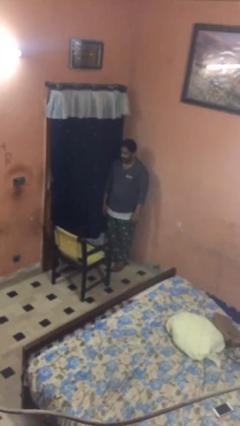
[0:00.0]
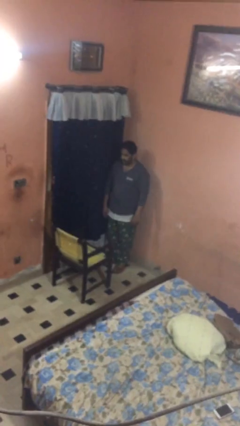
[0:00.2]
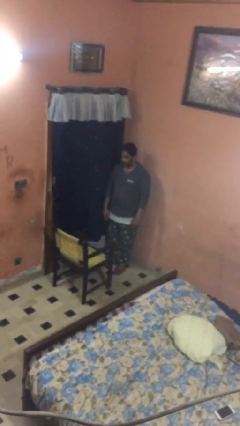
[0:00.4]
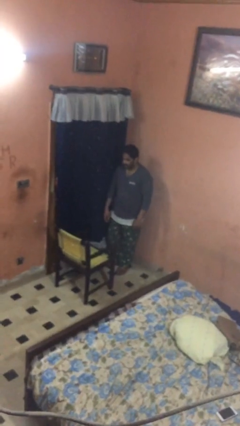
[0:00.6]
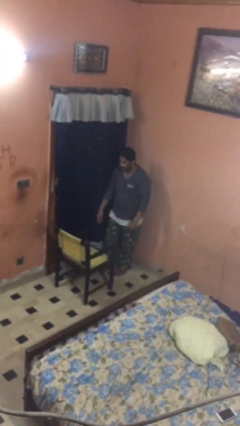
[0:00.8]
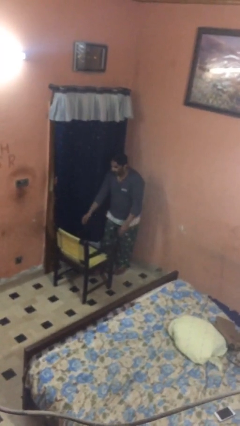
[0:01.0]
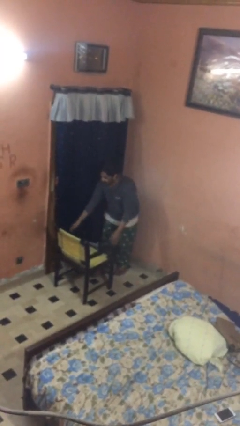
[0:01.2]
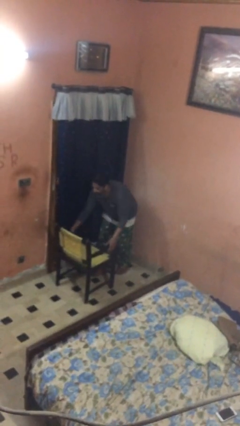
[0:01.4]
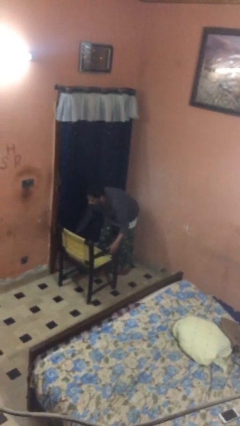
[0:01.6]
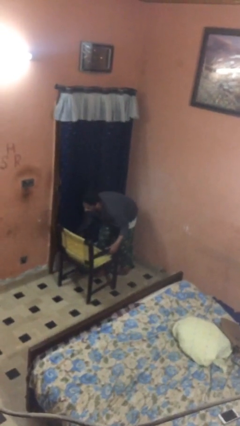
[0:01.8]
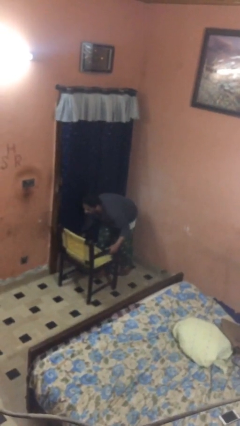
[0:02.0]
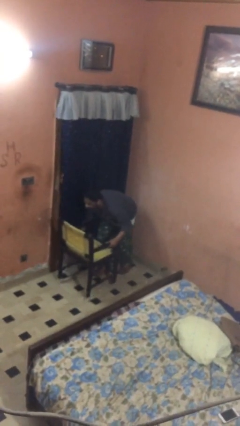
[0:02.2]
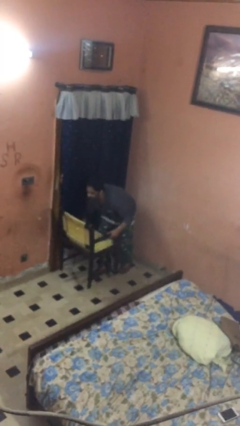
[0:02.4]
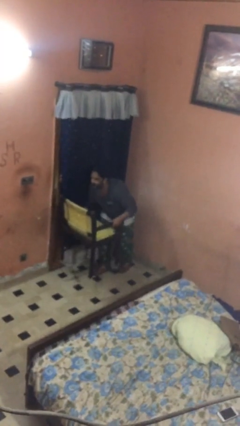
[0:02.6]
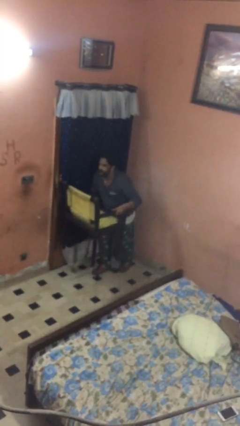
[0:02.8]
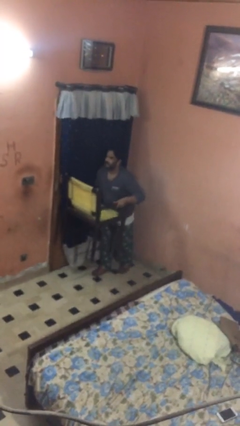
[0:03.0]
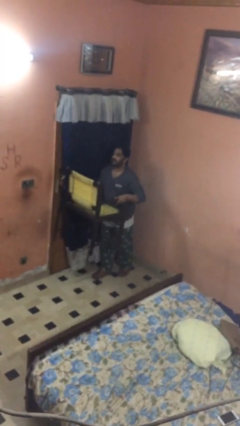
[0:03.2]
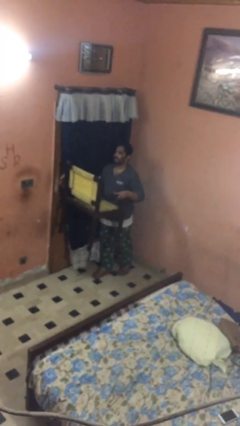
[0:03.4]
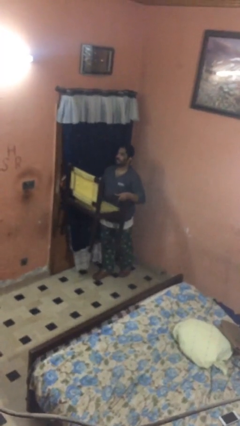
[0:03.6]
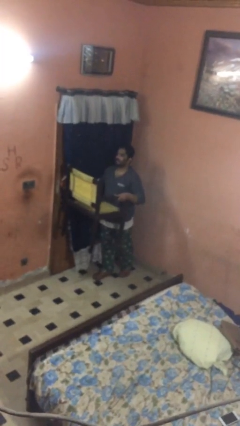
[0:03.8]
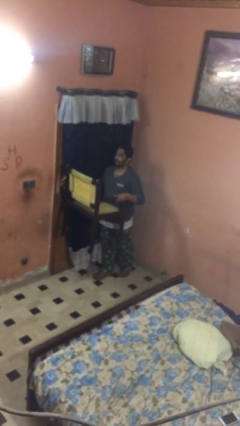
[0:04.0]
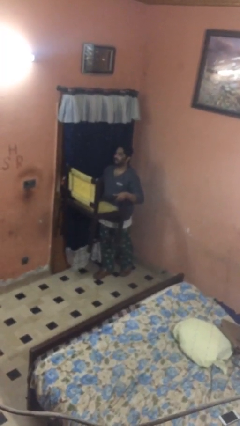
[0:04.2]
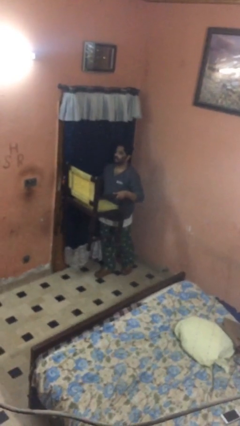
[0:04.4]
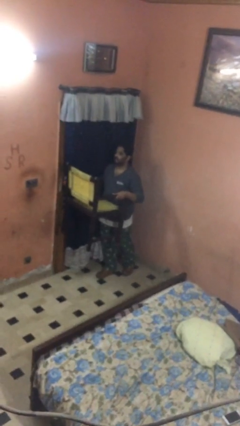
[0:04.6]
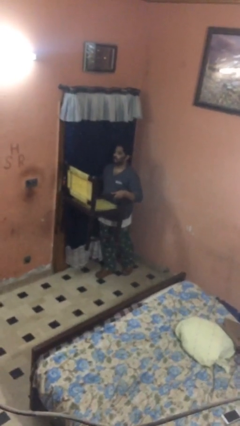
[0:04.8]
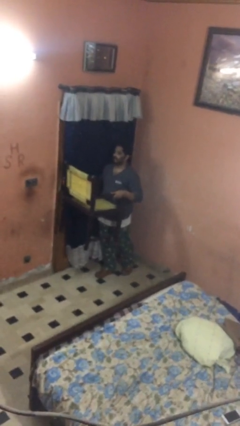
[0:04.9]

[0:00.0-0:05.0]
person picks up object from floor

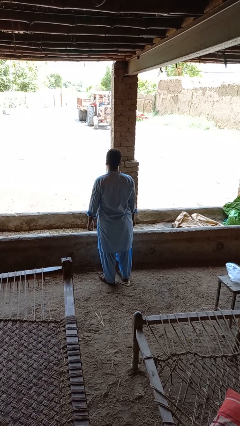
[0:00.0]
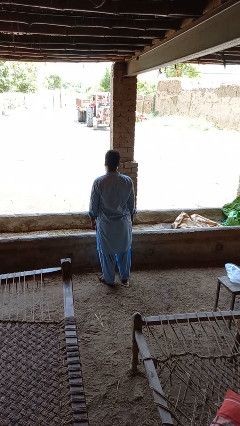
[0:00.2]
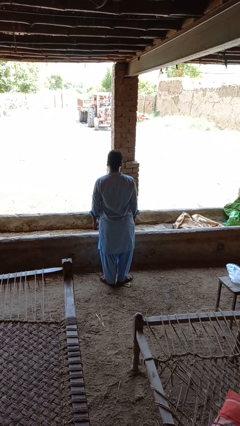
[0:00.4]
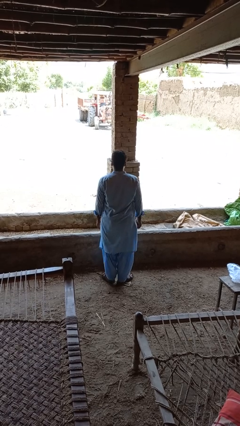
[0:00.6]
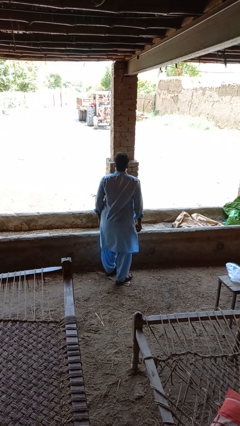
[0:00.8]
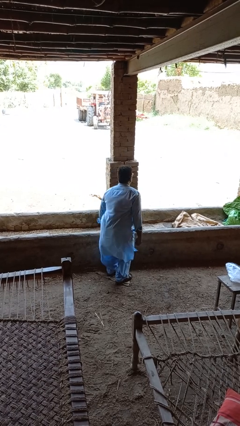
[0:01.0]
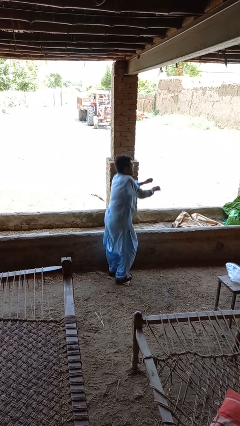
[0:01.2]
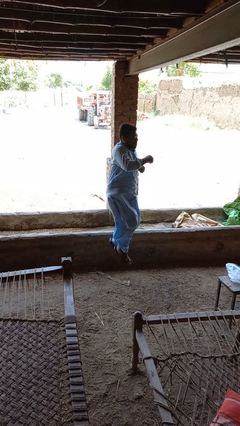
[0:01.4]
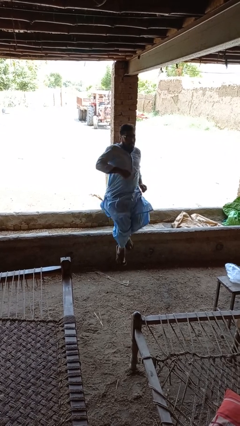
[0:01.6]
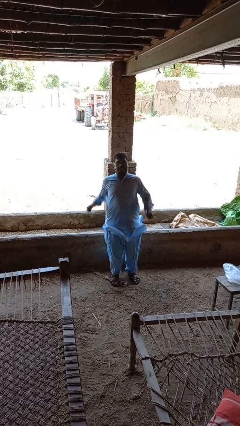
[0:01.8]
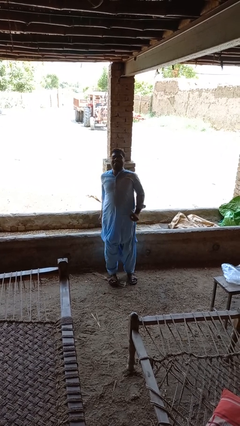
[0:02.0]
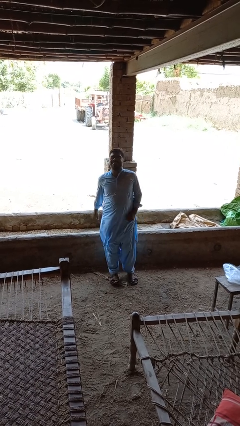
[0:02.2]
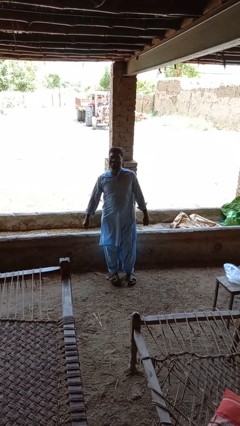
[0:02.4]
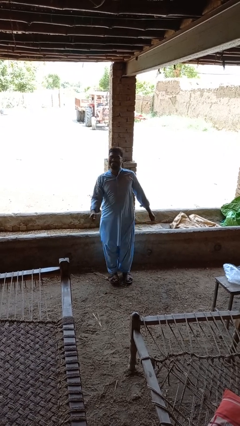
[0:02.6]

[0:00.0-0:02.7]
person jumps

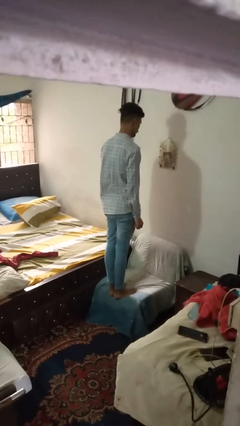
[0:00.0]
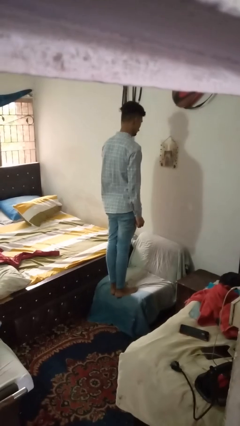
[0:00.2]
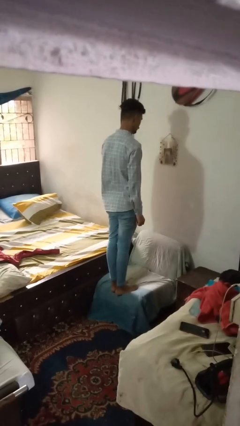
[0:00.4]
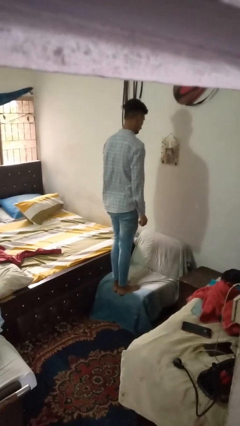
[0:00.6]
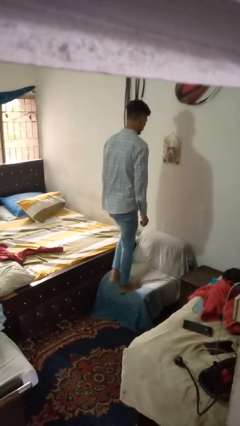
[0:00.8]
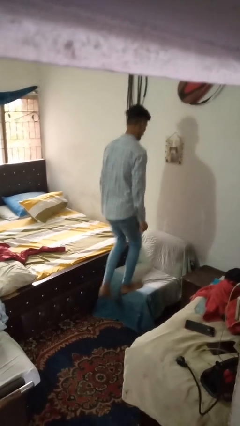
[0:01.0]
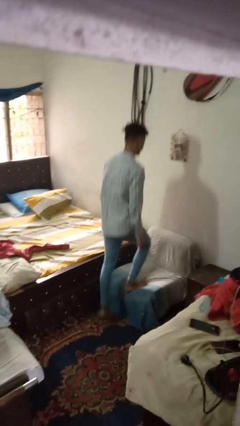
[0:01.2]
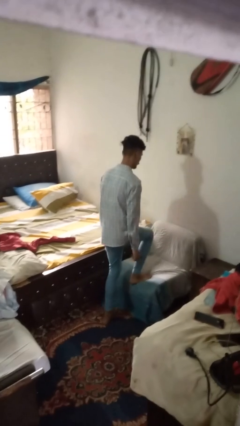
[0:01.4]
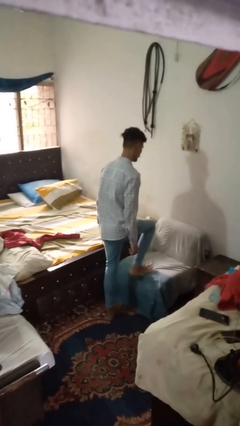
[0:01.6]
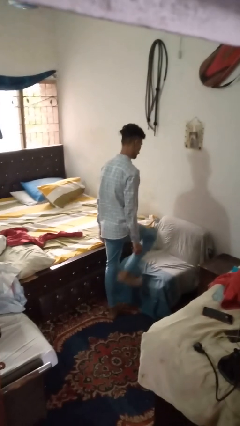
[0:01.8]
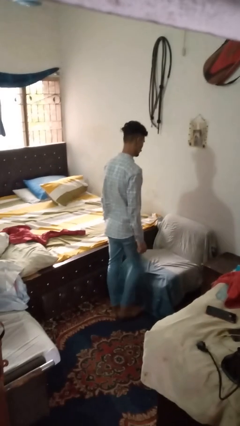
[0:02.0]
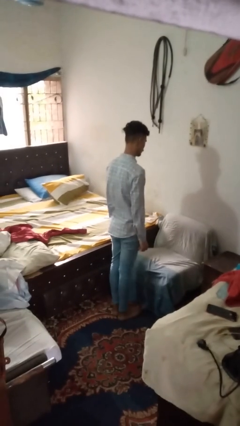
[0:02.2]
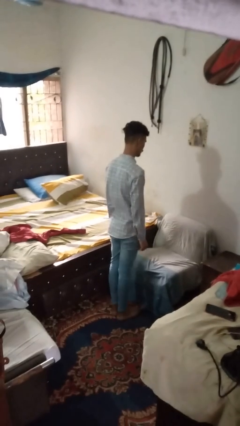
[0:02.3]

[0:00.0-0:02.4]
person climbs off couch

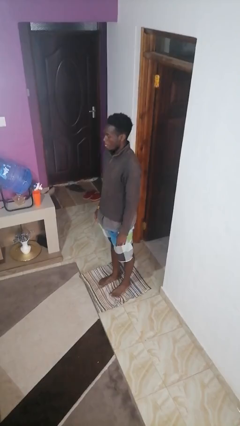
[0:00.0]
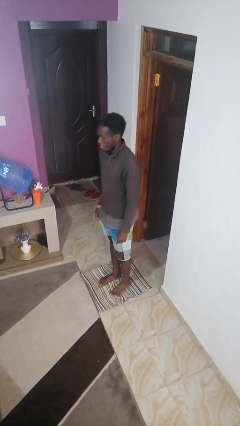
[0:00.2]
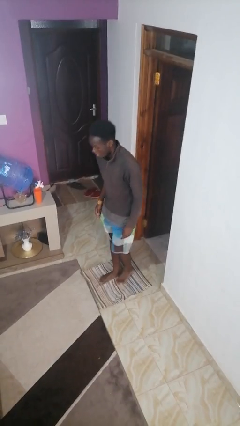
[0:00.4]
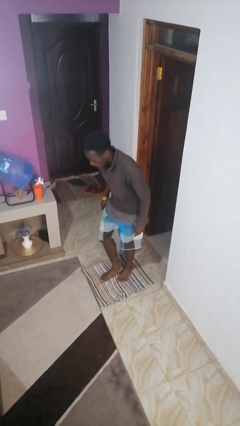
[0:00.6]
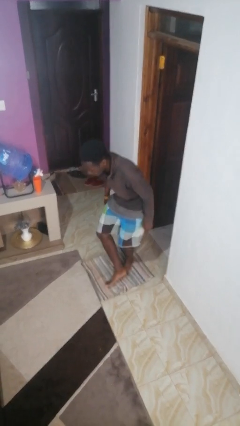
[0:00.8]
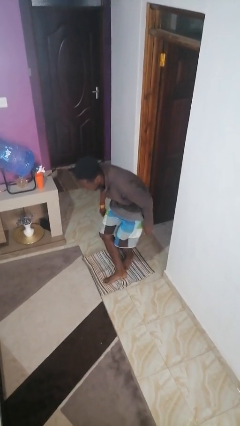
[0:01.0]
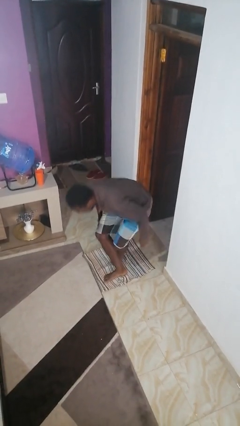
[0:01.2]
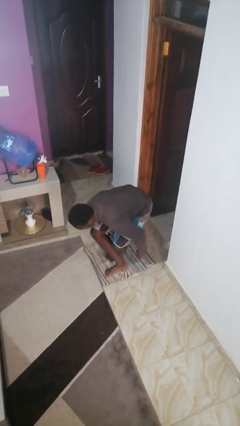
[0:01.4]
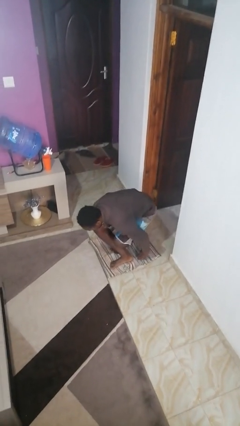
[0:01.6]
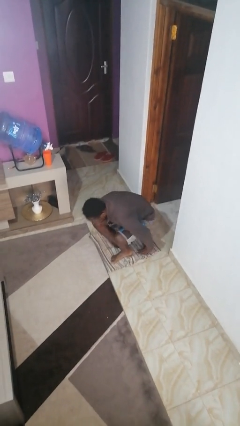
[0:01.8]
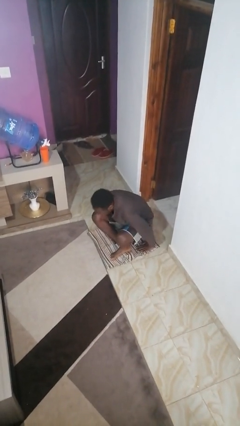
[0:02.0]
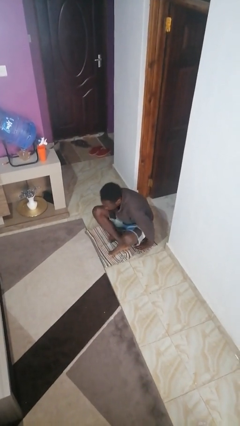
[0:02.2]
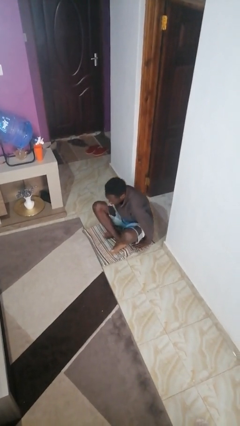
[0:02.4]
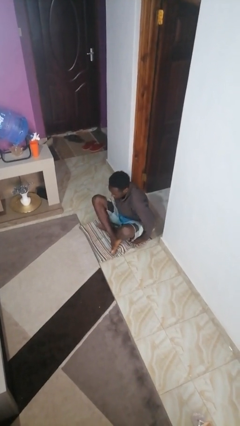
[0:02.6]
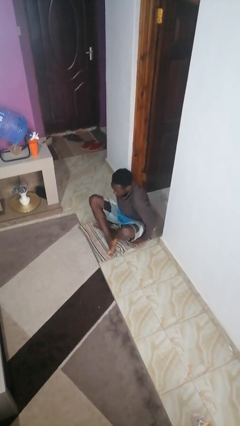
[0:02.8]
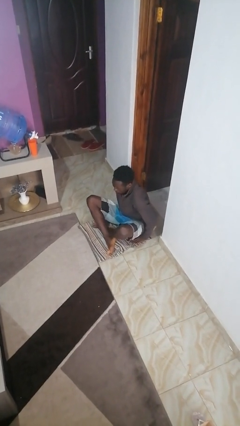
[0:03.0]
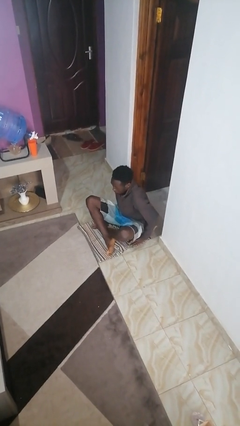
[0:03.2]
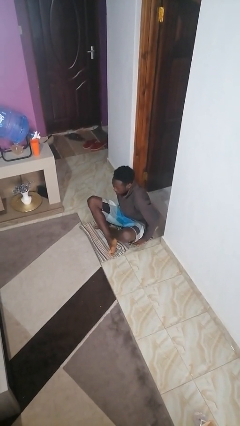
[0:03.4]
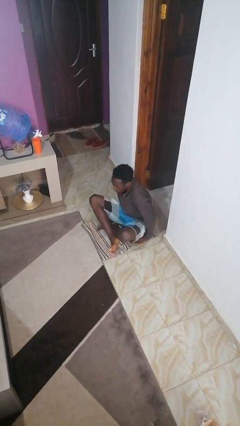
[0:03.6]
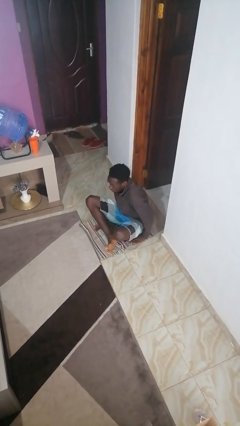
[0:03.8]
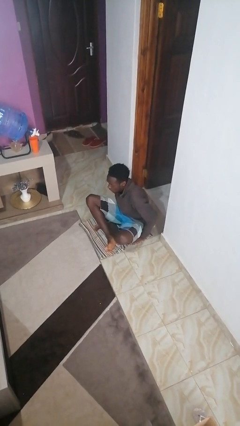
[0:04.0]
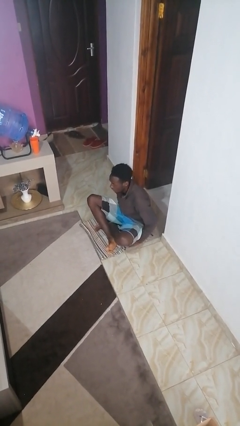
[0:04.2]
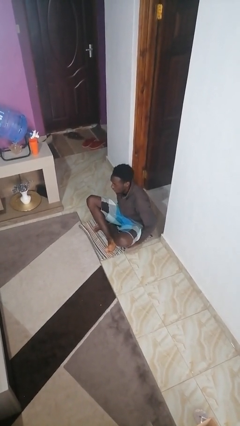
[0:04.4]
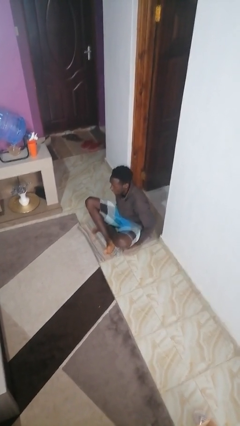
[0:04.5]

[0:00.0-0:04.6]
person sits crisscross

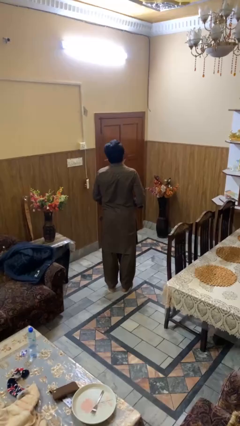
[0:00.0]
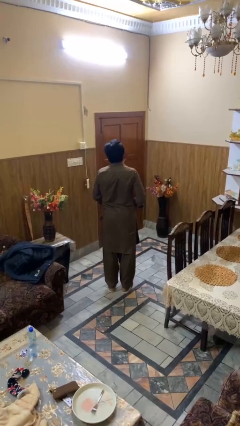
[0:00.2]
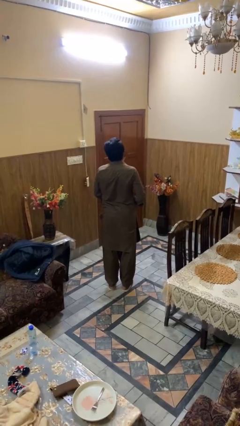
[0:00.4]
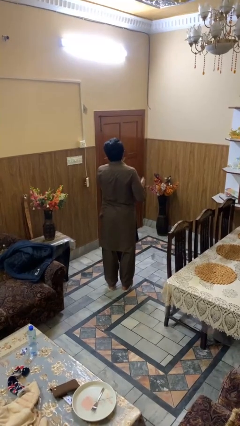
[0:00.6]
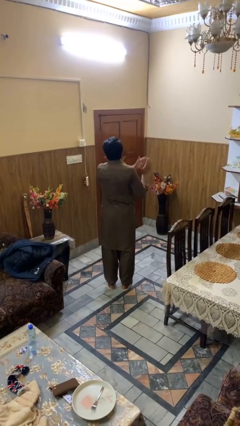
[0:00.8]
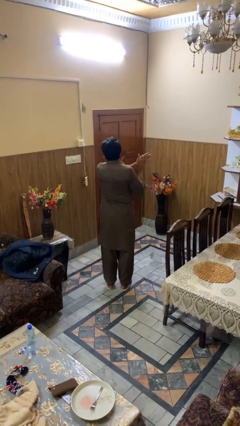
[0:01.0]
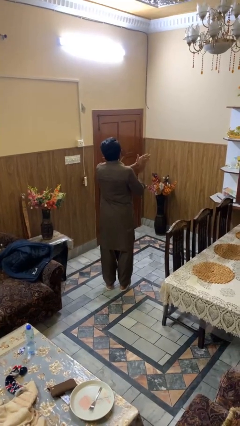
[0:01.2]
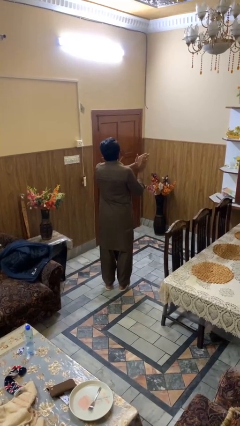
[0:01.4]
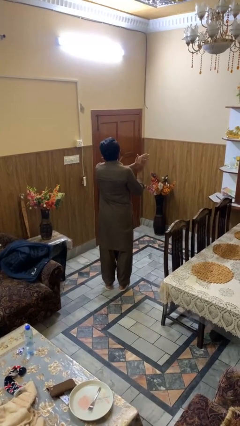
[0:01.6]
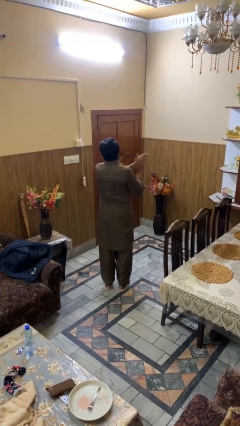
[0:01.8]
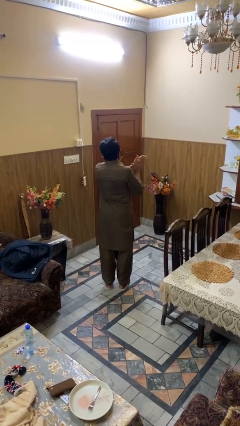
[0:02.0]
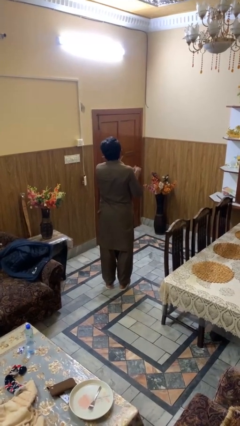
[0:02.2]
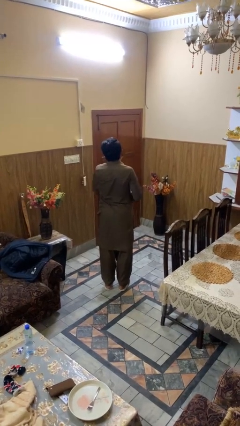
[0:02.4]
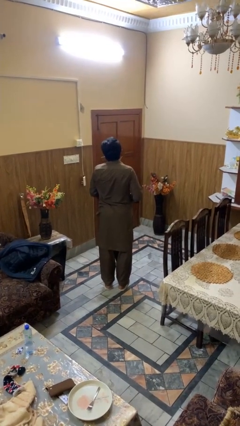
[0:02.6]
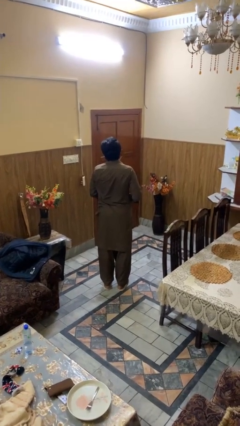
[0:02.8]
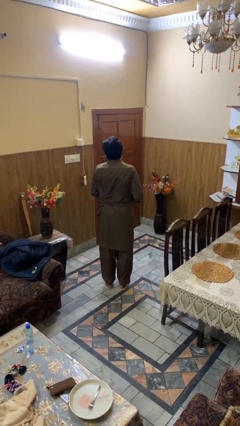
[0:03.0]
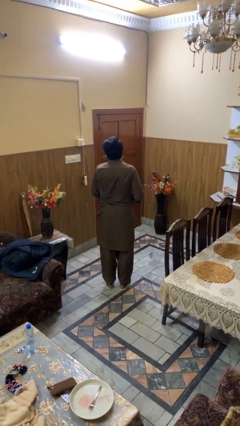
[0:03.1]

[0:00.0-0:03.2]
person claps hands
